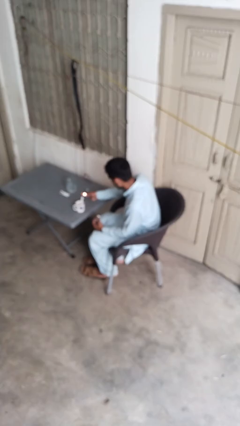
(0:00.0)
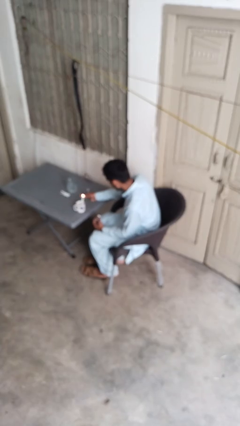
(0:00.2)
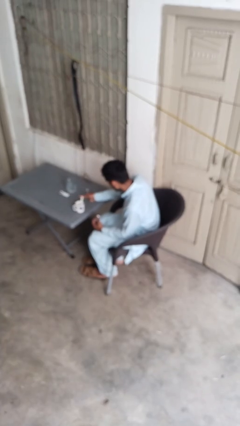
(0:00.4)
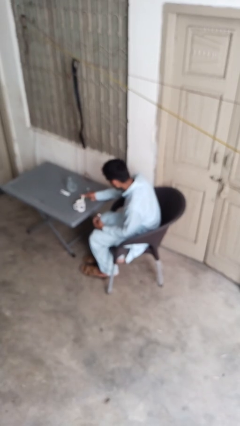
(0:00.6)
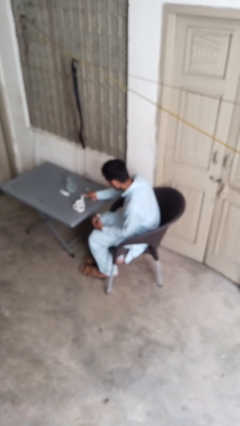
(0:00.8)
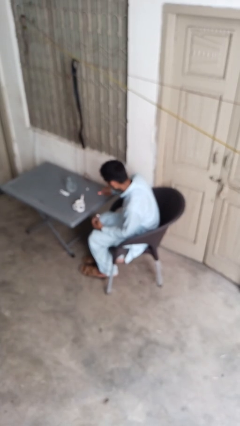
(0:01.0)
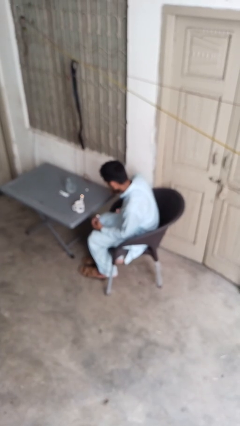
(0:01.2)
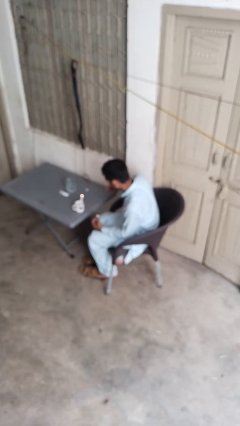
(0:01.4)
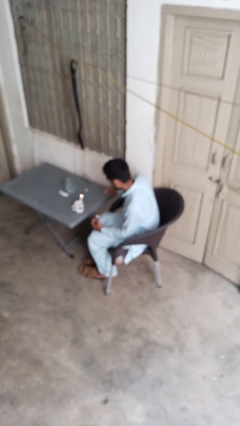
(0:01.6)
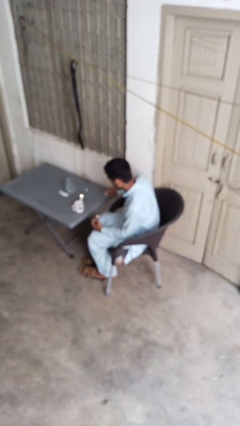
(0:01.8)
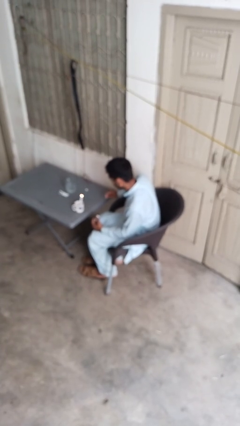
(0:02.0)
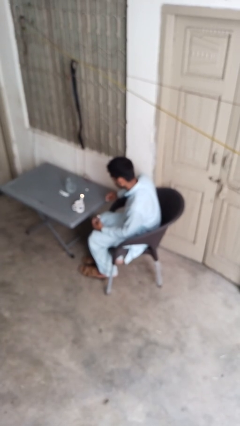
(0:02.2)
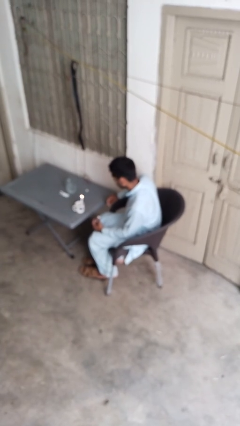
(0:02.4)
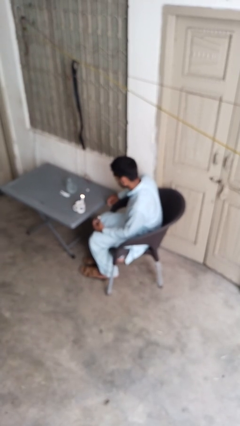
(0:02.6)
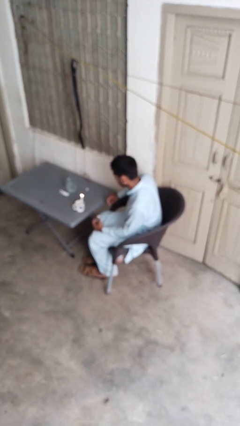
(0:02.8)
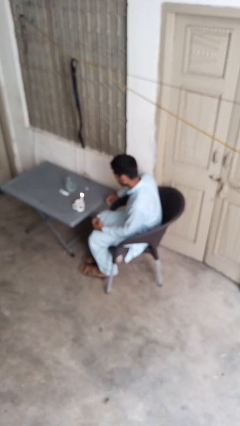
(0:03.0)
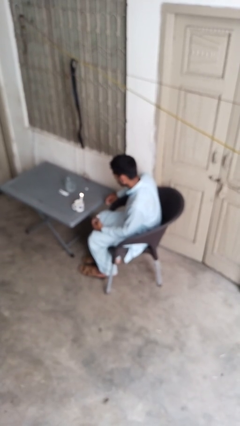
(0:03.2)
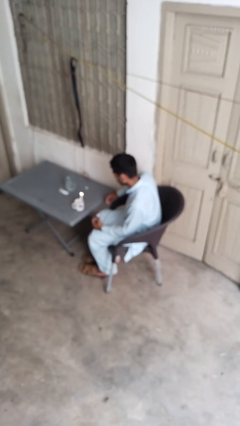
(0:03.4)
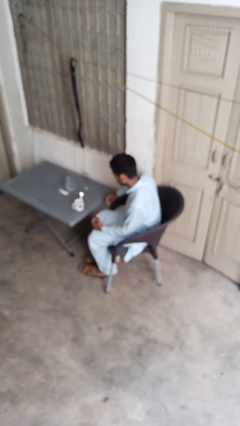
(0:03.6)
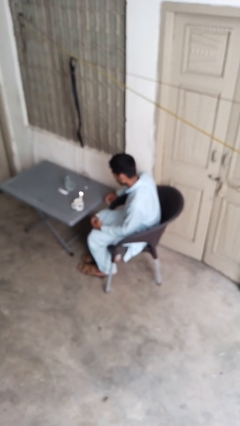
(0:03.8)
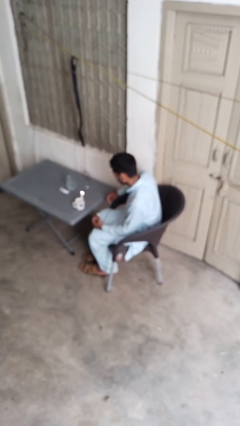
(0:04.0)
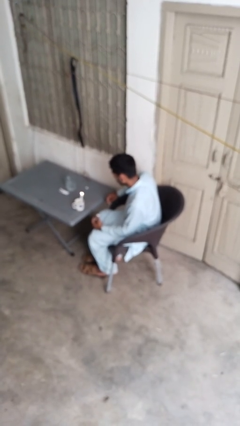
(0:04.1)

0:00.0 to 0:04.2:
person lights candle

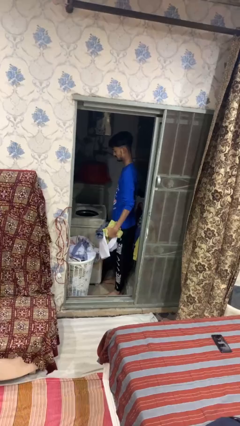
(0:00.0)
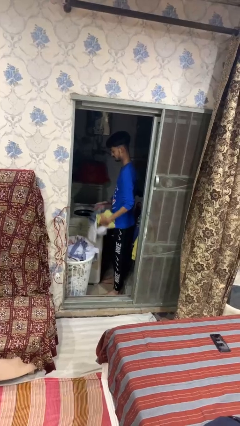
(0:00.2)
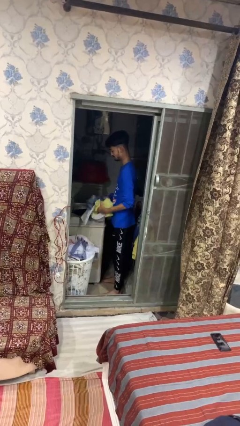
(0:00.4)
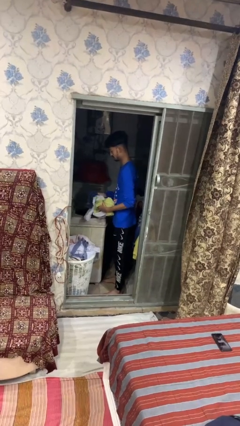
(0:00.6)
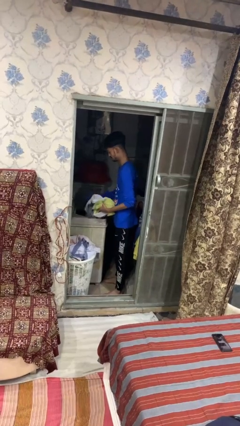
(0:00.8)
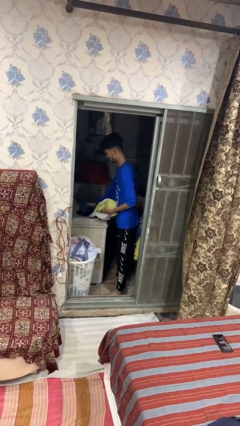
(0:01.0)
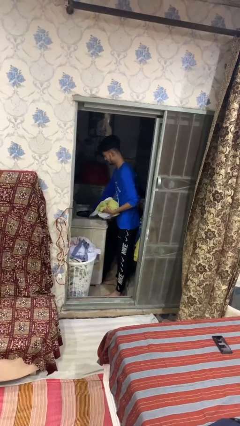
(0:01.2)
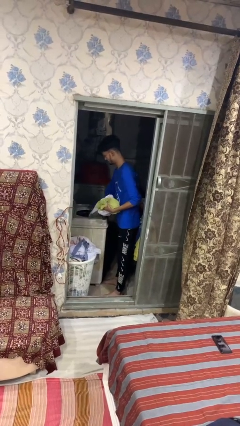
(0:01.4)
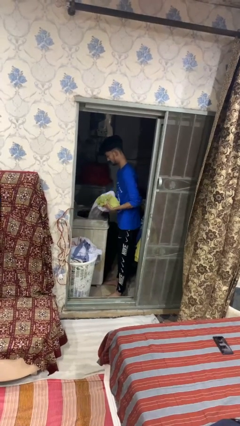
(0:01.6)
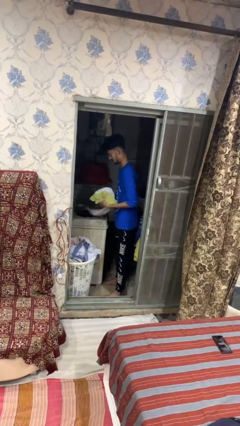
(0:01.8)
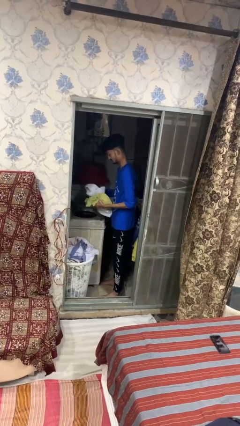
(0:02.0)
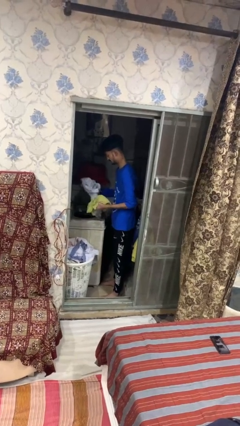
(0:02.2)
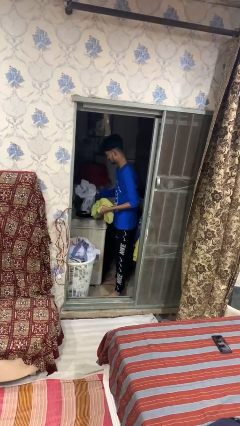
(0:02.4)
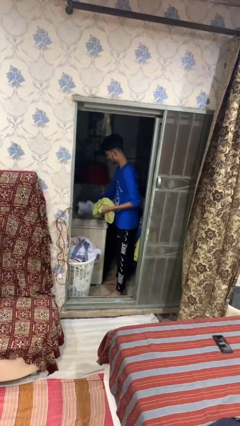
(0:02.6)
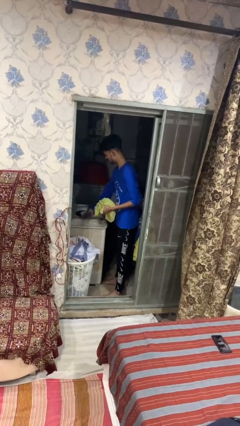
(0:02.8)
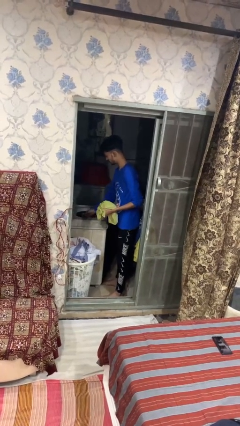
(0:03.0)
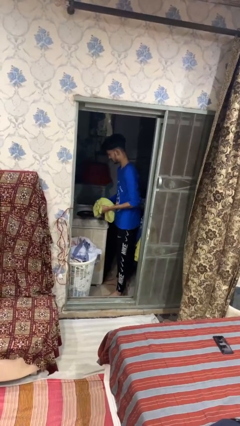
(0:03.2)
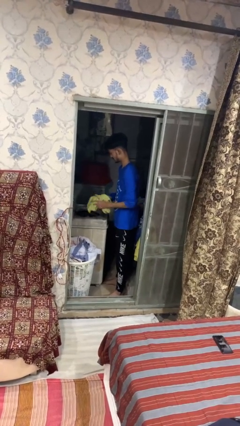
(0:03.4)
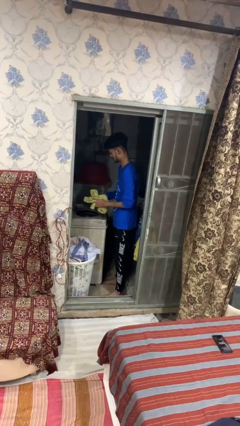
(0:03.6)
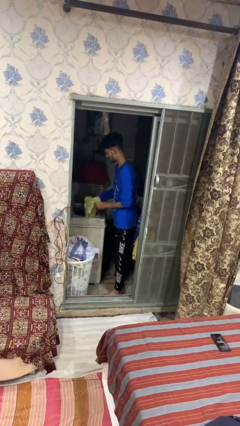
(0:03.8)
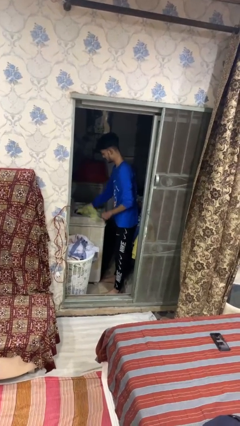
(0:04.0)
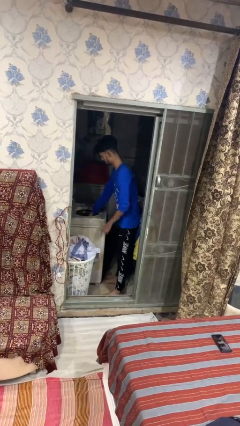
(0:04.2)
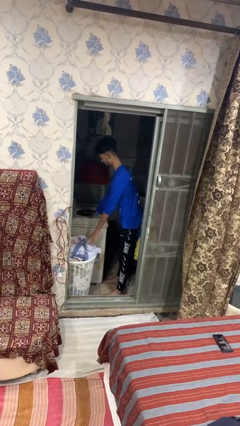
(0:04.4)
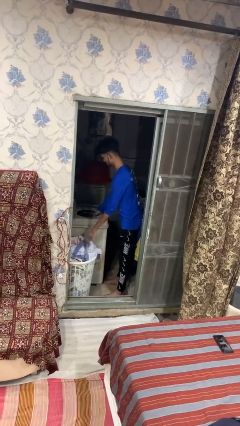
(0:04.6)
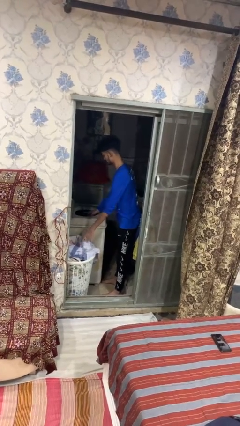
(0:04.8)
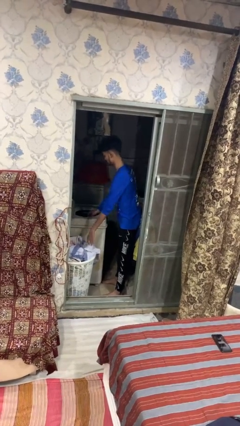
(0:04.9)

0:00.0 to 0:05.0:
person loads dryer

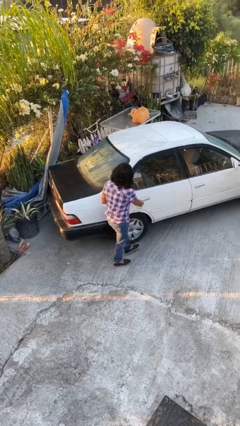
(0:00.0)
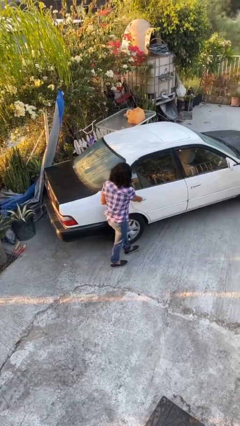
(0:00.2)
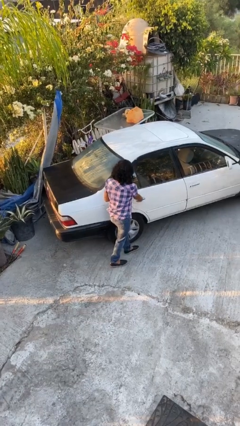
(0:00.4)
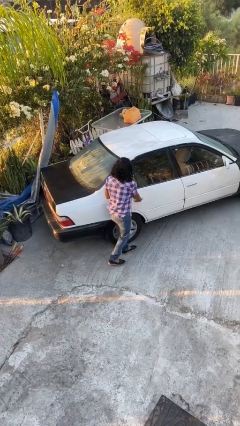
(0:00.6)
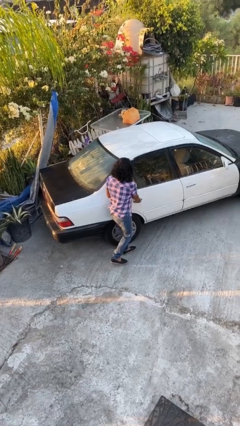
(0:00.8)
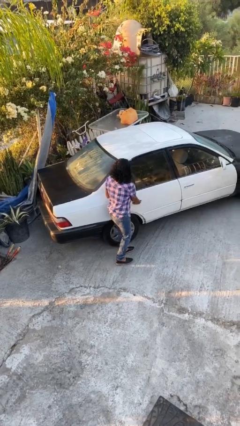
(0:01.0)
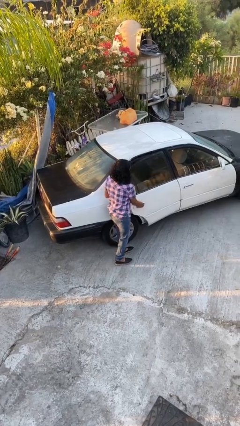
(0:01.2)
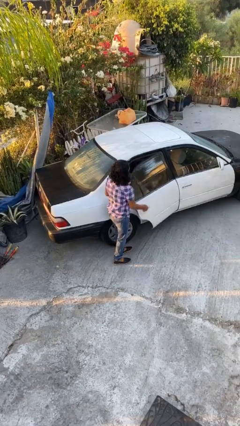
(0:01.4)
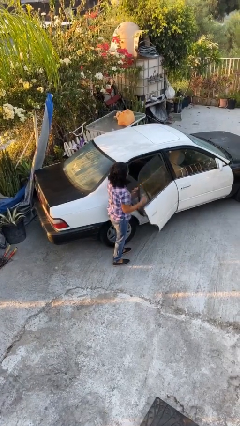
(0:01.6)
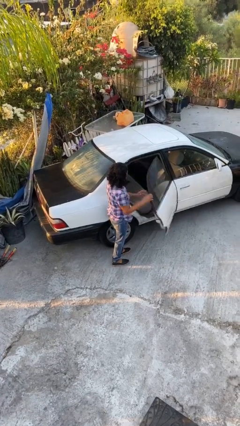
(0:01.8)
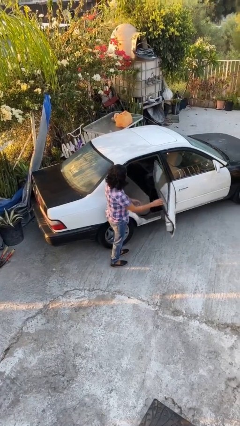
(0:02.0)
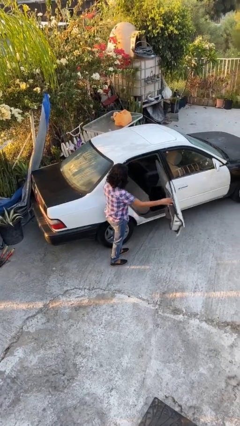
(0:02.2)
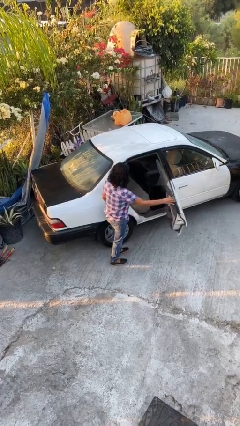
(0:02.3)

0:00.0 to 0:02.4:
person opens car door

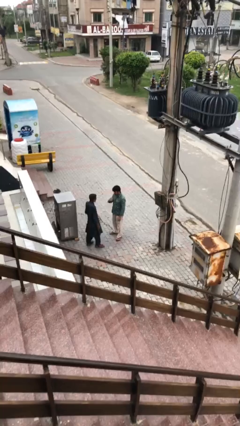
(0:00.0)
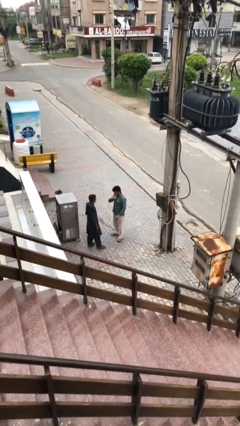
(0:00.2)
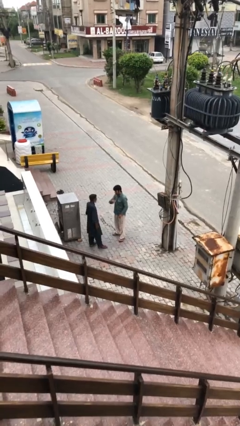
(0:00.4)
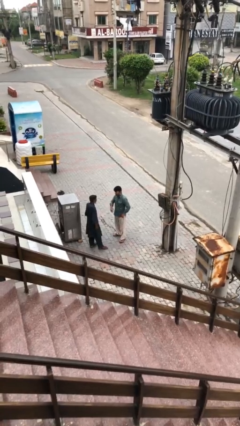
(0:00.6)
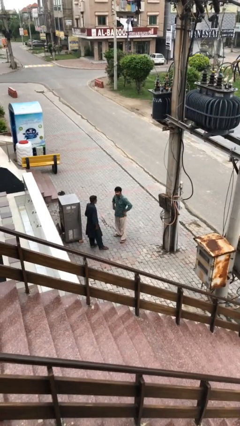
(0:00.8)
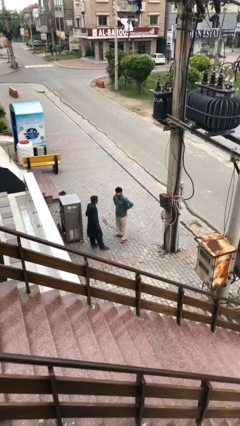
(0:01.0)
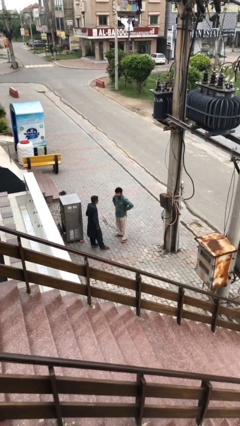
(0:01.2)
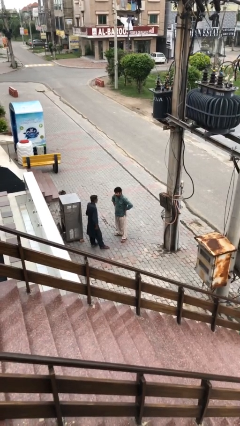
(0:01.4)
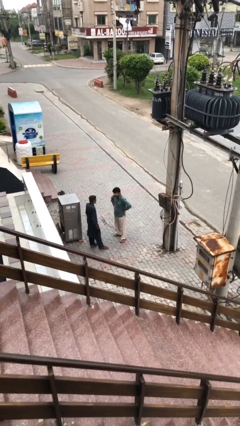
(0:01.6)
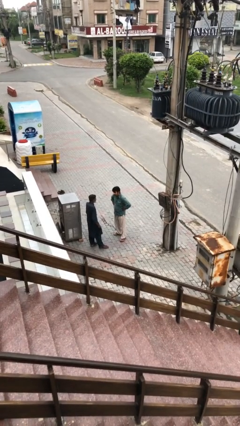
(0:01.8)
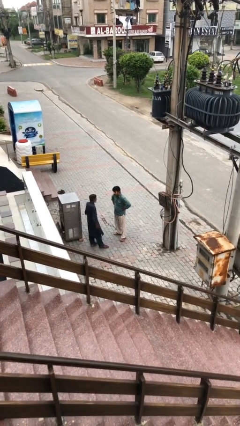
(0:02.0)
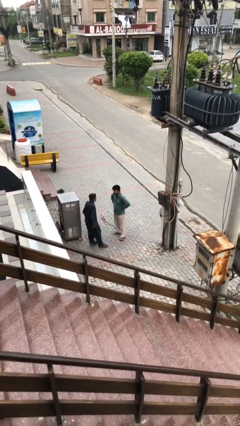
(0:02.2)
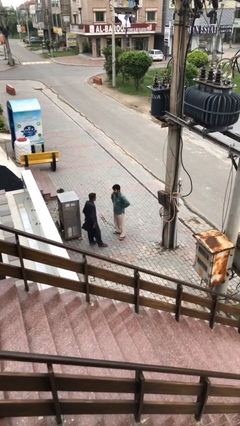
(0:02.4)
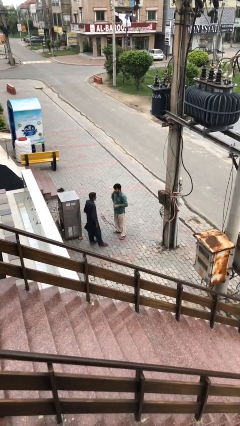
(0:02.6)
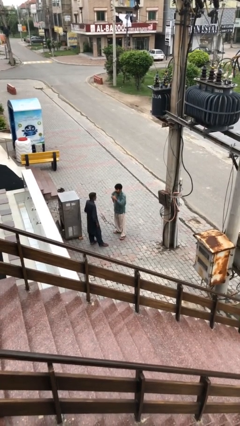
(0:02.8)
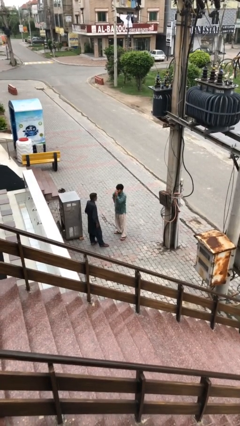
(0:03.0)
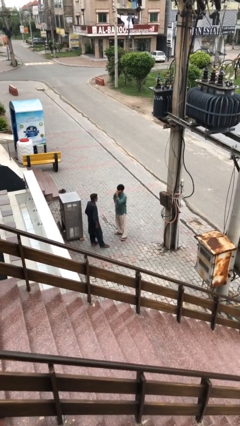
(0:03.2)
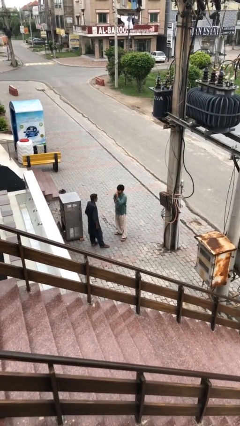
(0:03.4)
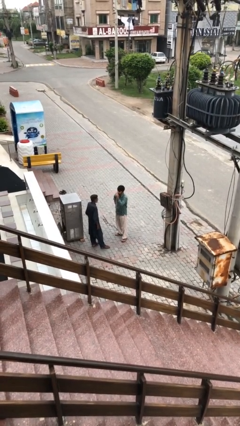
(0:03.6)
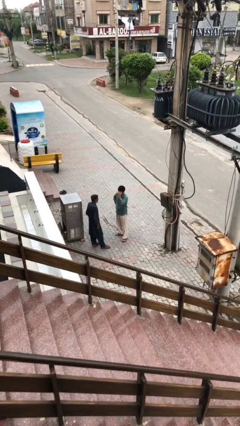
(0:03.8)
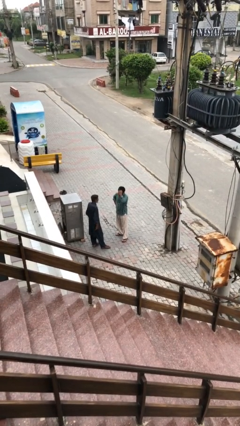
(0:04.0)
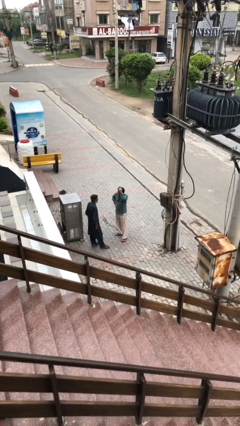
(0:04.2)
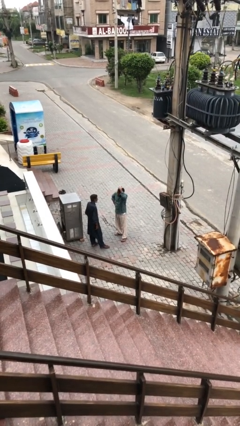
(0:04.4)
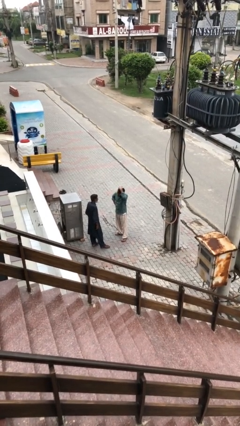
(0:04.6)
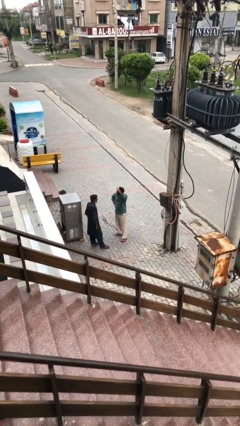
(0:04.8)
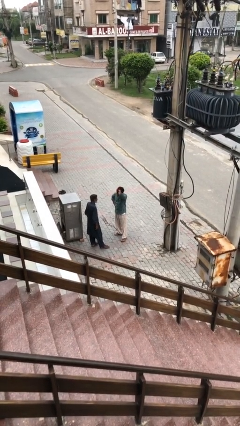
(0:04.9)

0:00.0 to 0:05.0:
person talks to person

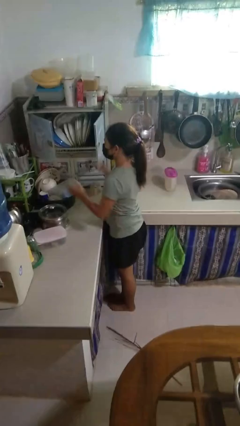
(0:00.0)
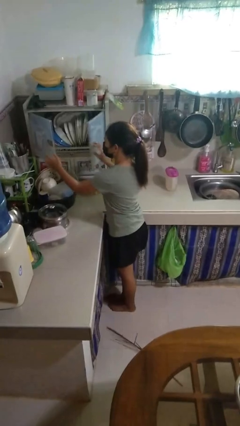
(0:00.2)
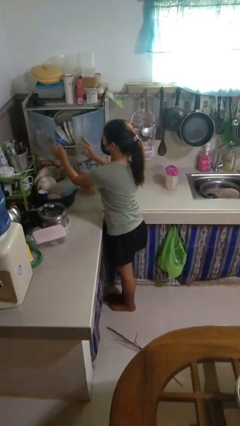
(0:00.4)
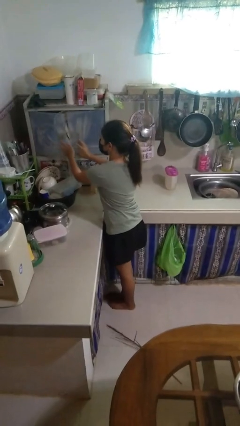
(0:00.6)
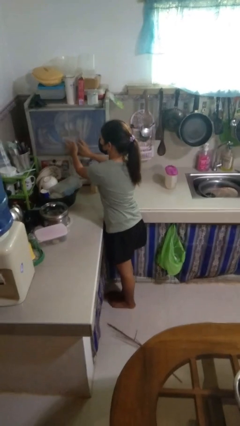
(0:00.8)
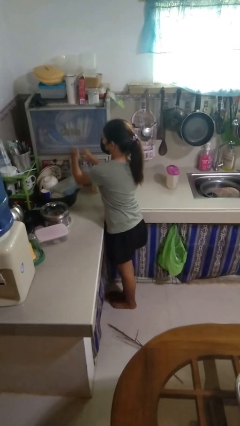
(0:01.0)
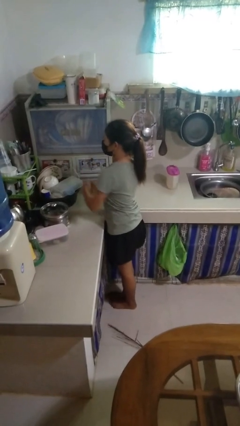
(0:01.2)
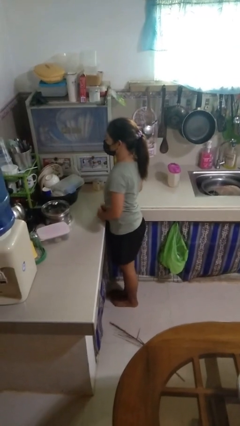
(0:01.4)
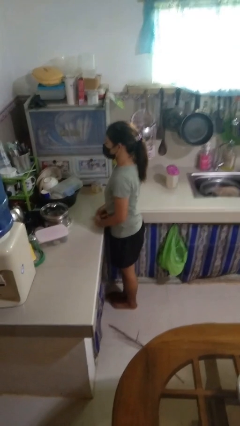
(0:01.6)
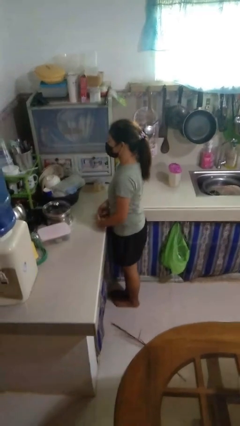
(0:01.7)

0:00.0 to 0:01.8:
person closes kitchen drawer
